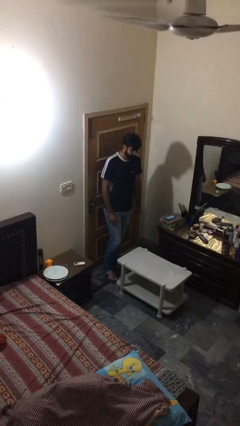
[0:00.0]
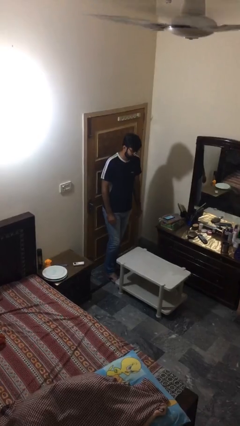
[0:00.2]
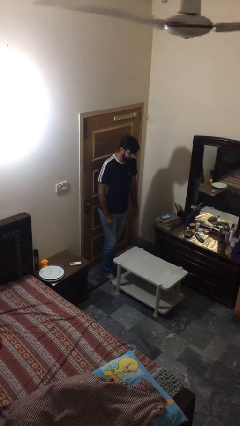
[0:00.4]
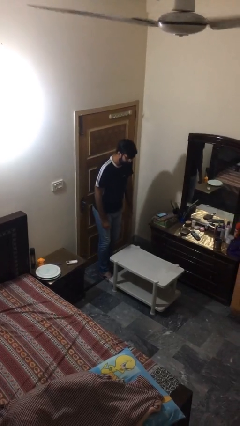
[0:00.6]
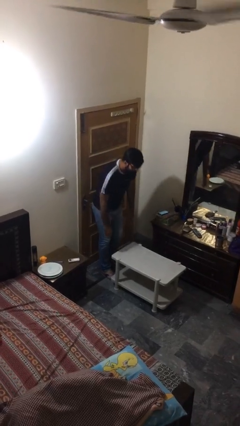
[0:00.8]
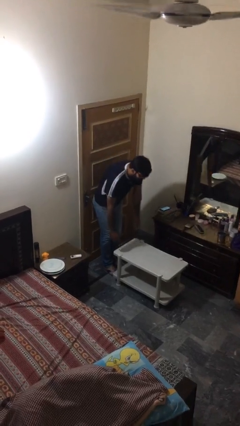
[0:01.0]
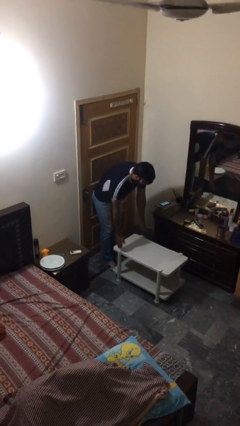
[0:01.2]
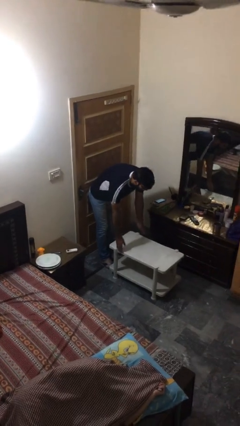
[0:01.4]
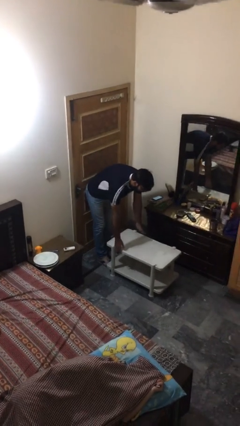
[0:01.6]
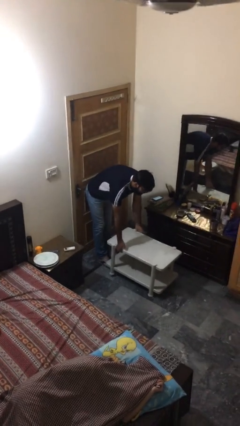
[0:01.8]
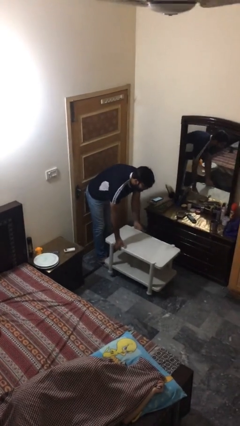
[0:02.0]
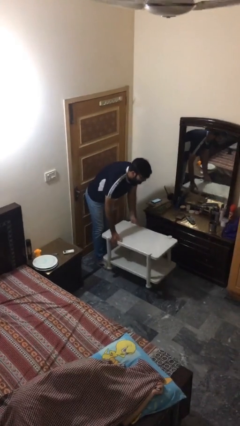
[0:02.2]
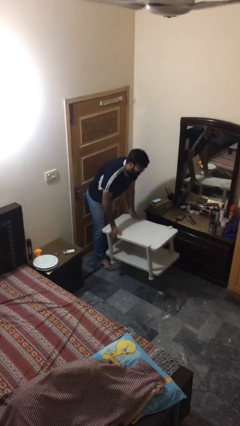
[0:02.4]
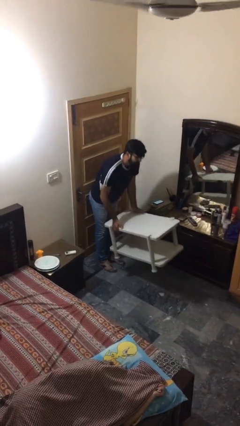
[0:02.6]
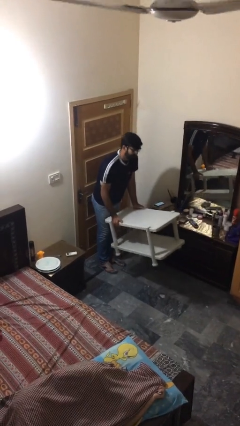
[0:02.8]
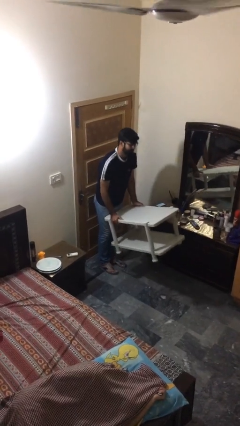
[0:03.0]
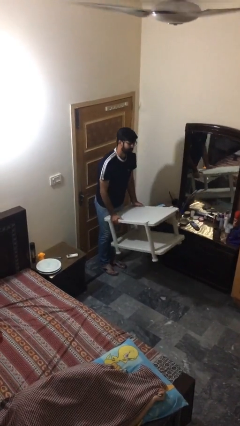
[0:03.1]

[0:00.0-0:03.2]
person picks up object from floor

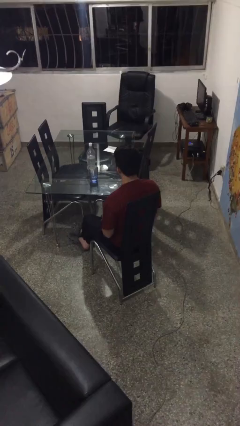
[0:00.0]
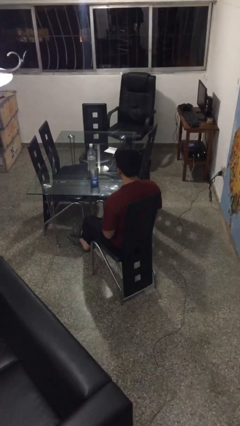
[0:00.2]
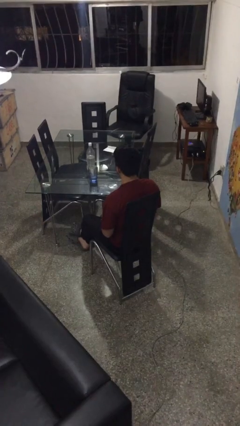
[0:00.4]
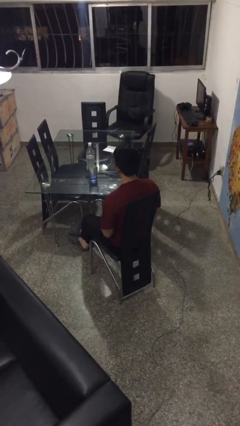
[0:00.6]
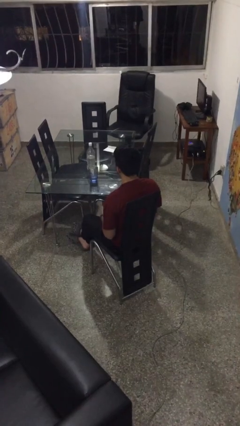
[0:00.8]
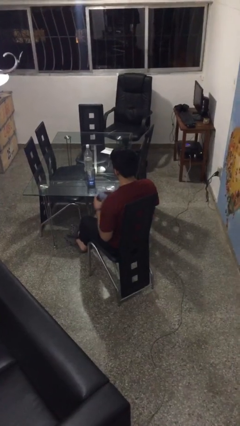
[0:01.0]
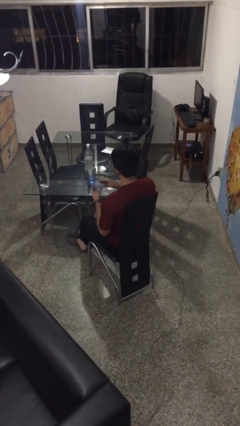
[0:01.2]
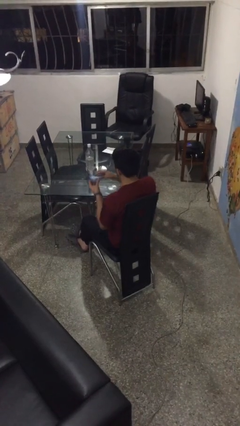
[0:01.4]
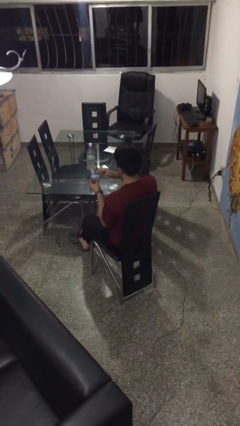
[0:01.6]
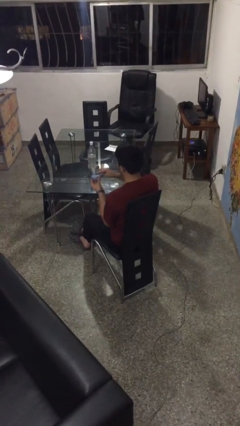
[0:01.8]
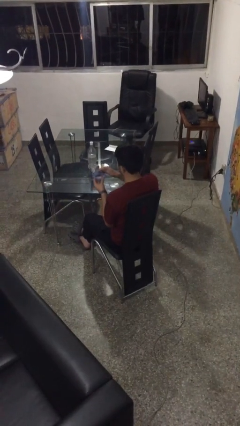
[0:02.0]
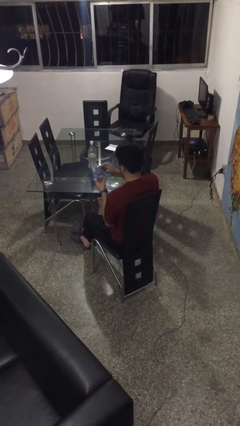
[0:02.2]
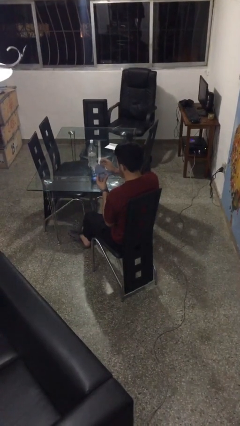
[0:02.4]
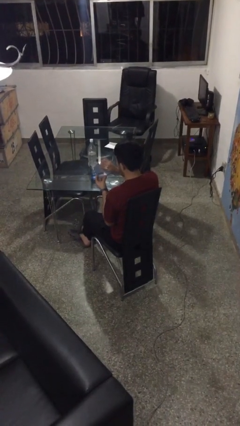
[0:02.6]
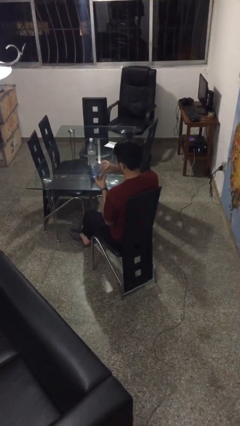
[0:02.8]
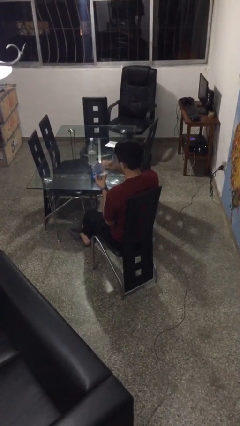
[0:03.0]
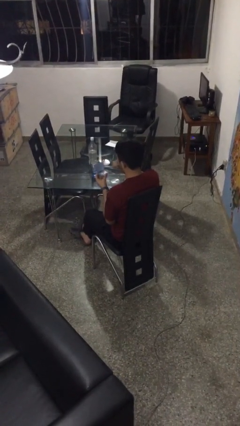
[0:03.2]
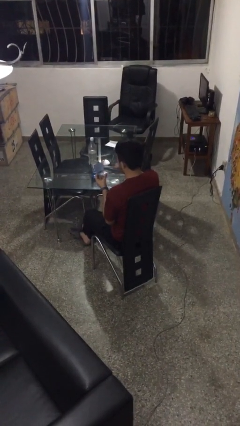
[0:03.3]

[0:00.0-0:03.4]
person takes medicine pills

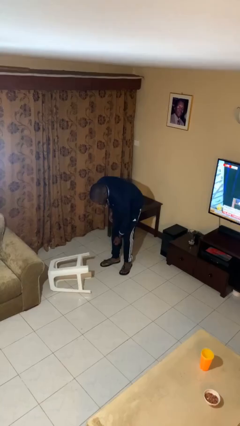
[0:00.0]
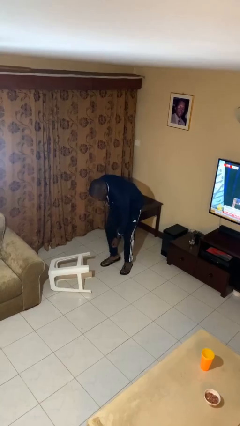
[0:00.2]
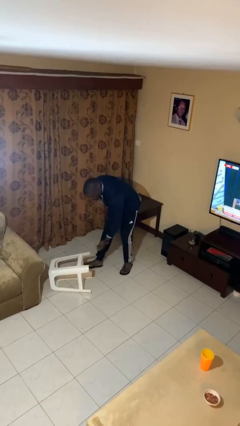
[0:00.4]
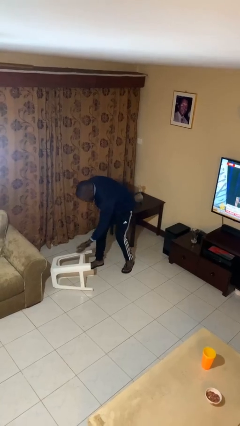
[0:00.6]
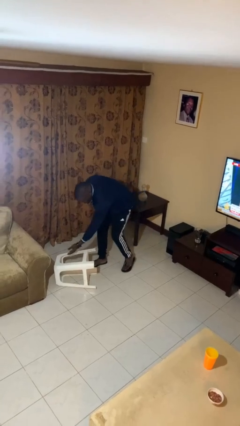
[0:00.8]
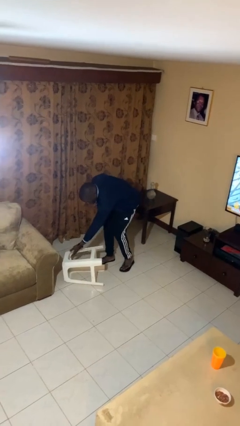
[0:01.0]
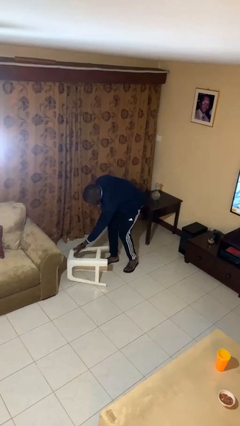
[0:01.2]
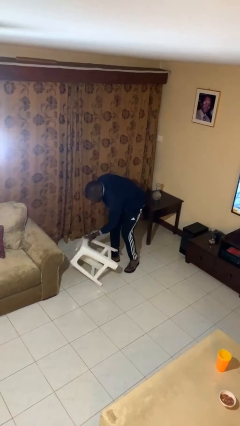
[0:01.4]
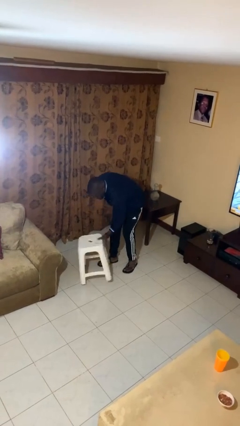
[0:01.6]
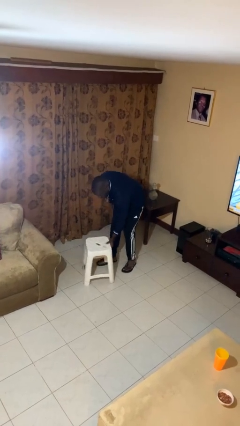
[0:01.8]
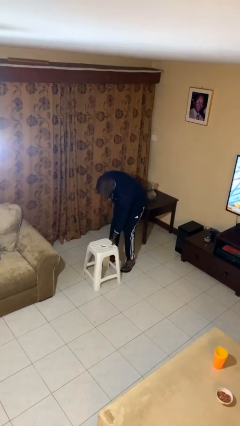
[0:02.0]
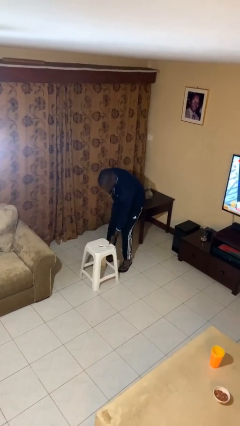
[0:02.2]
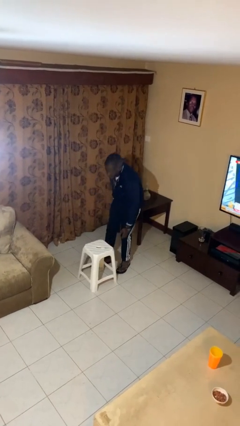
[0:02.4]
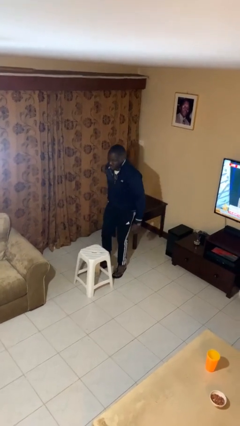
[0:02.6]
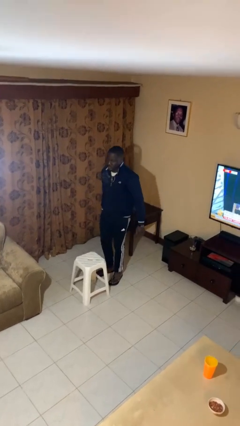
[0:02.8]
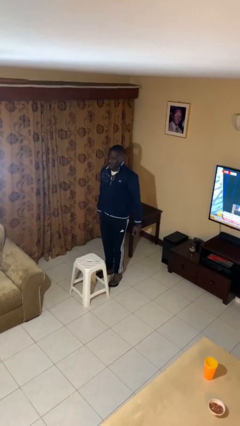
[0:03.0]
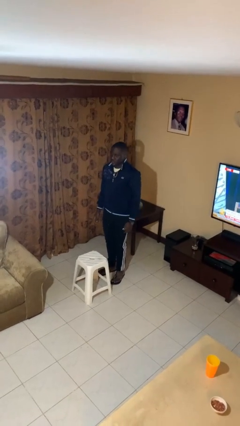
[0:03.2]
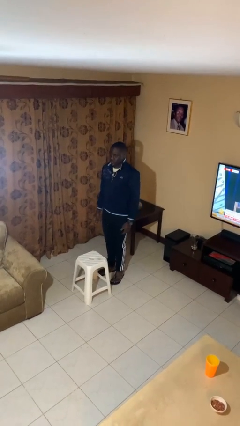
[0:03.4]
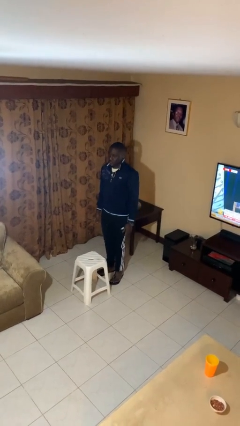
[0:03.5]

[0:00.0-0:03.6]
person sets upright furniture

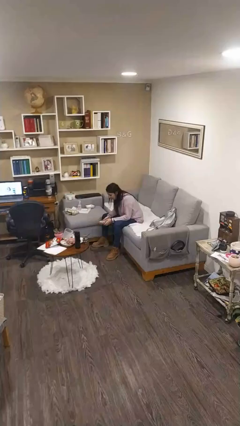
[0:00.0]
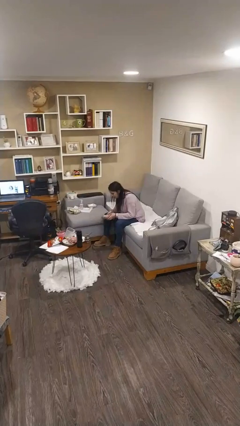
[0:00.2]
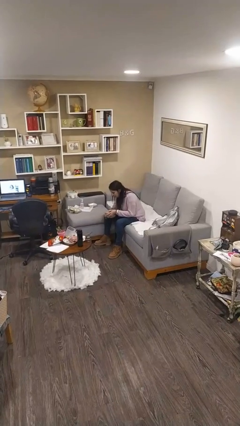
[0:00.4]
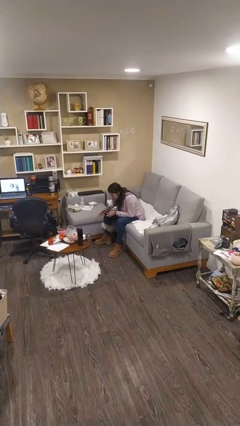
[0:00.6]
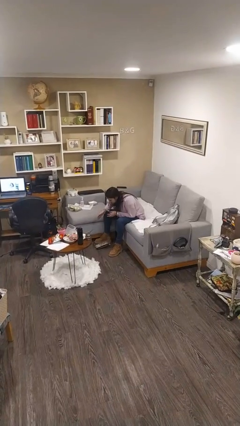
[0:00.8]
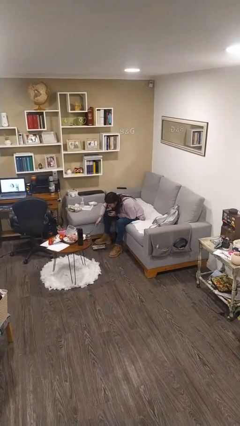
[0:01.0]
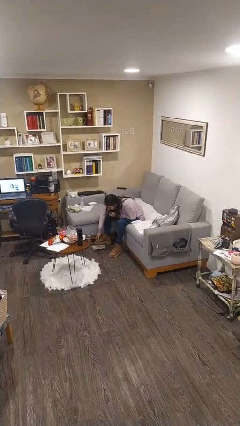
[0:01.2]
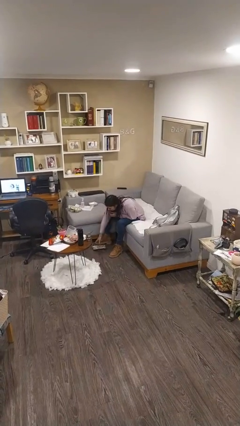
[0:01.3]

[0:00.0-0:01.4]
person drops object

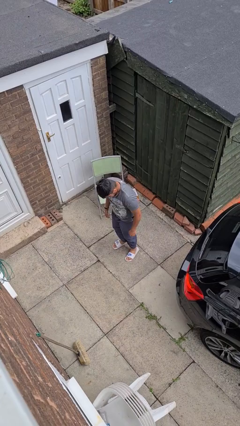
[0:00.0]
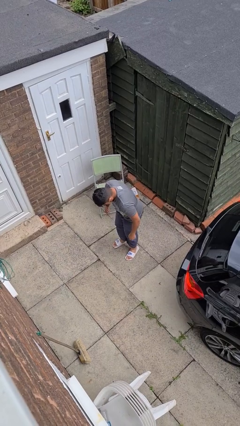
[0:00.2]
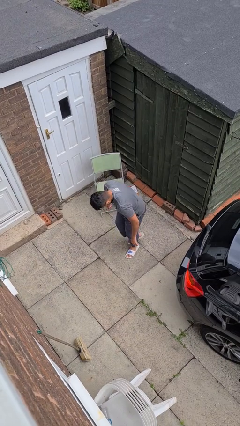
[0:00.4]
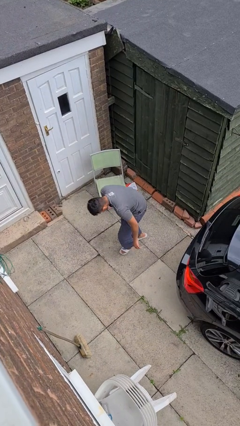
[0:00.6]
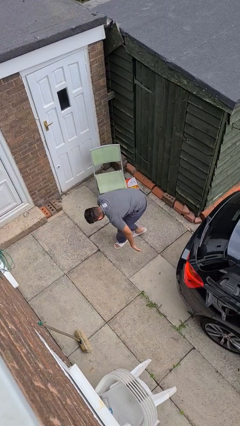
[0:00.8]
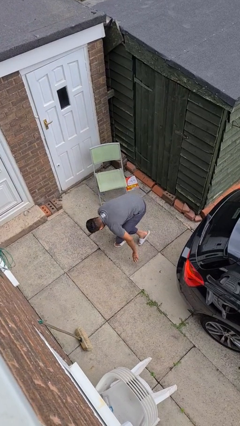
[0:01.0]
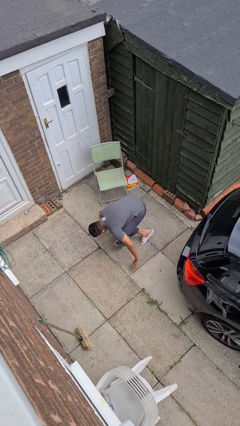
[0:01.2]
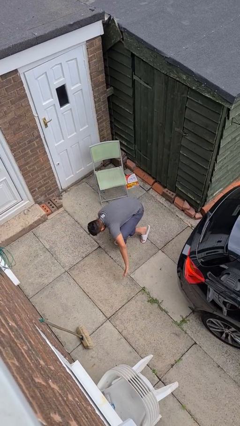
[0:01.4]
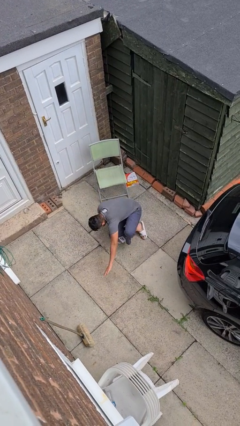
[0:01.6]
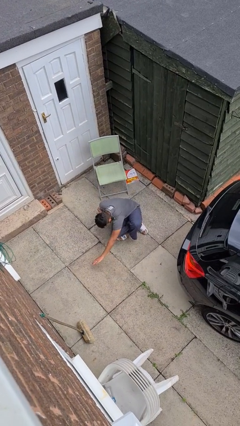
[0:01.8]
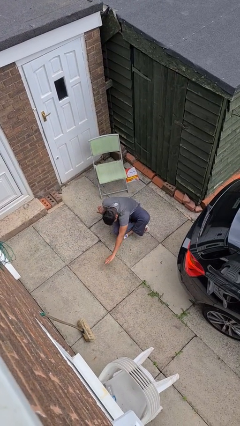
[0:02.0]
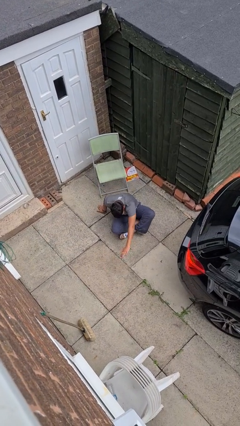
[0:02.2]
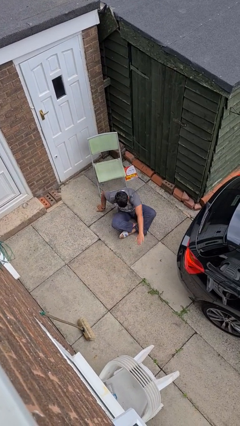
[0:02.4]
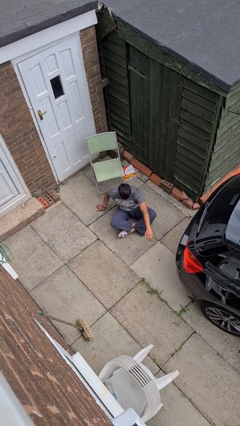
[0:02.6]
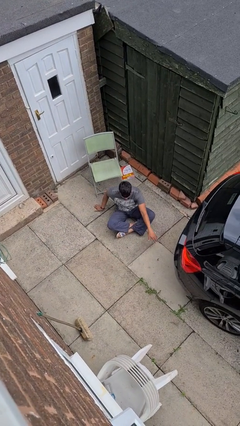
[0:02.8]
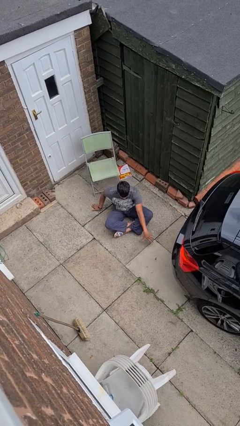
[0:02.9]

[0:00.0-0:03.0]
person sits crisscross

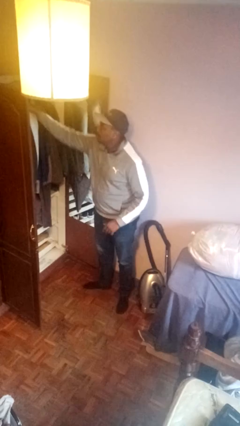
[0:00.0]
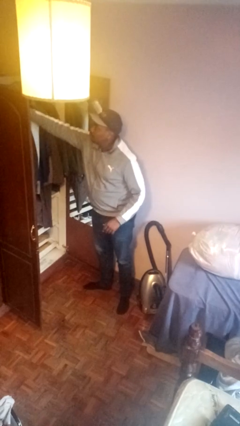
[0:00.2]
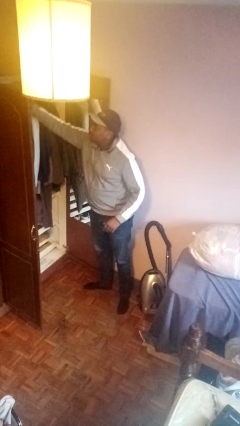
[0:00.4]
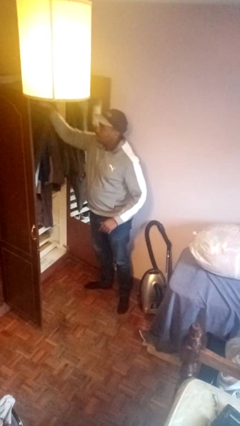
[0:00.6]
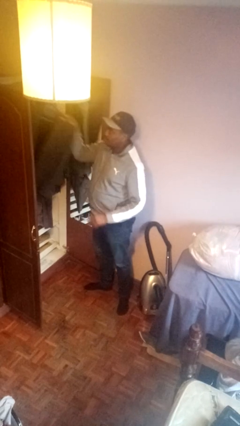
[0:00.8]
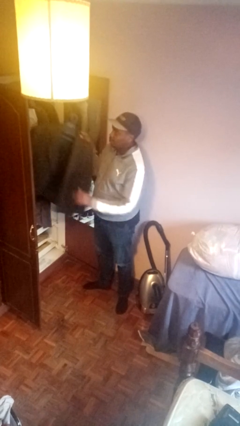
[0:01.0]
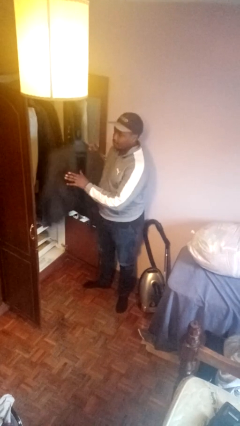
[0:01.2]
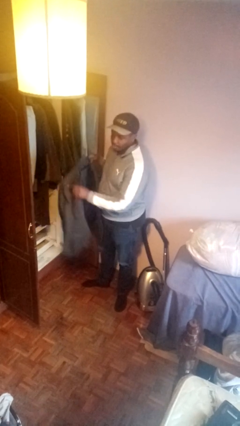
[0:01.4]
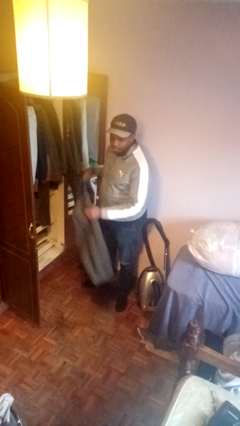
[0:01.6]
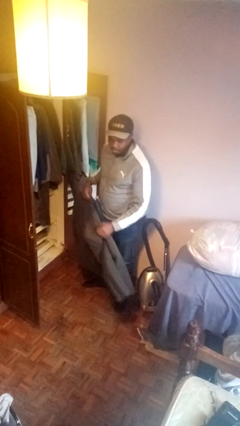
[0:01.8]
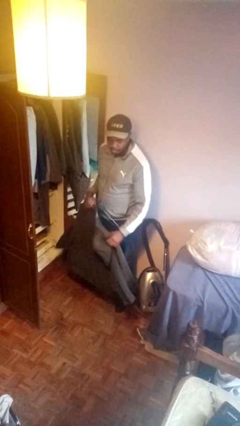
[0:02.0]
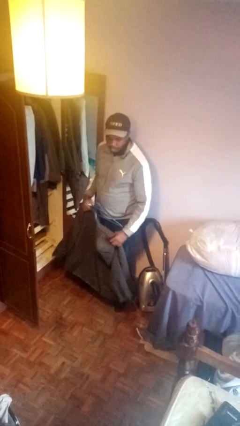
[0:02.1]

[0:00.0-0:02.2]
person takes clothes from closet

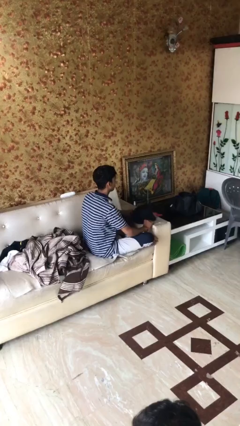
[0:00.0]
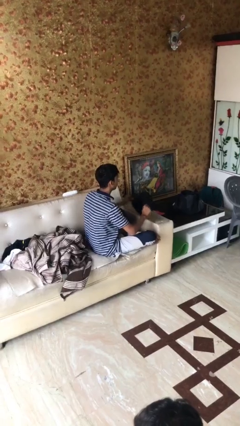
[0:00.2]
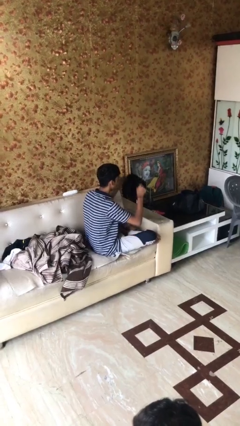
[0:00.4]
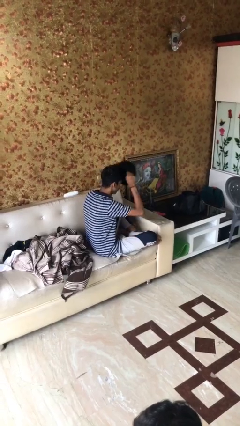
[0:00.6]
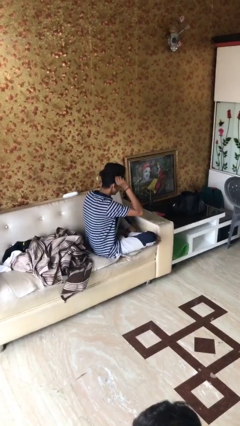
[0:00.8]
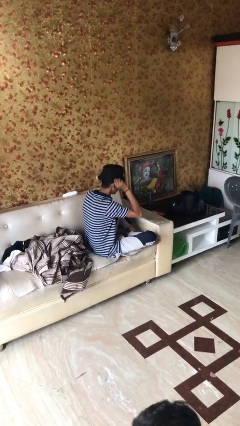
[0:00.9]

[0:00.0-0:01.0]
person puts on hat
